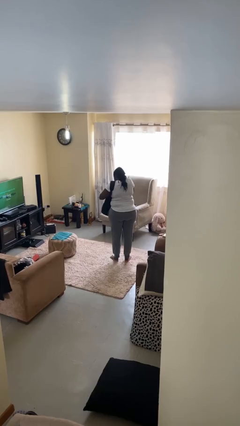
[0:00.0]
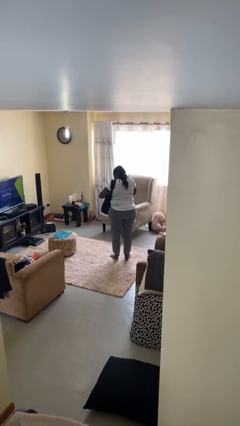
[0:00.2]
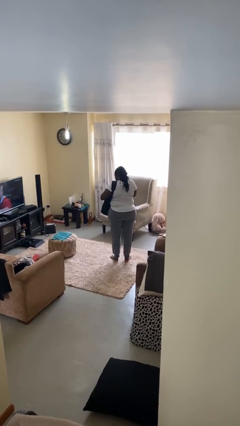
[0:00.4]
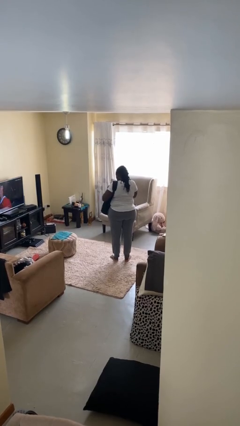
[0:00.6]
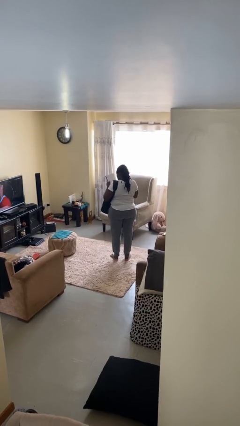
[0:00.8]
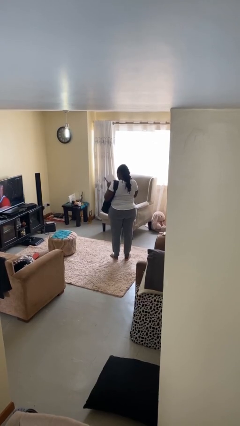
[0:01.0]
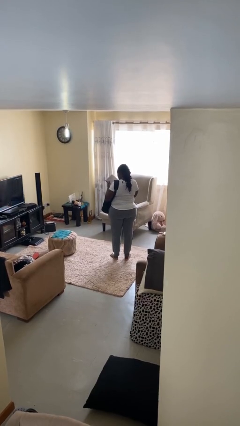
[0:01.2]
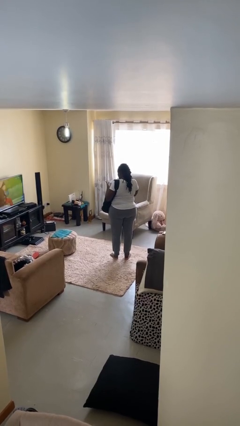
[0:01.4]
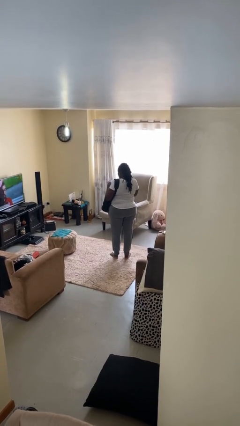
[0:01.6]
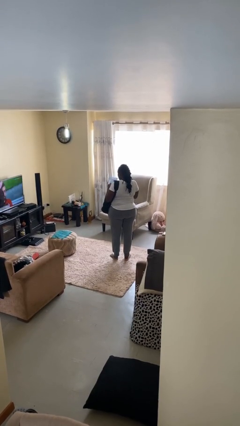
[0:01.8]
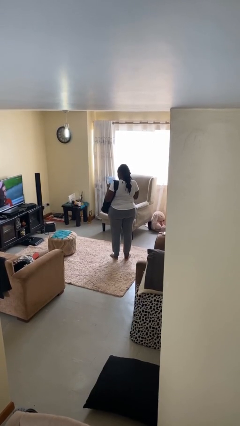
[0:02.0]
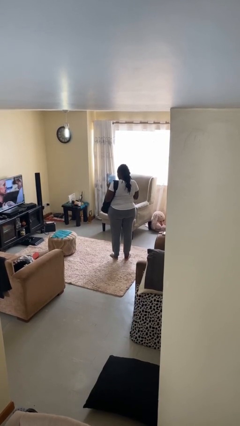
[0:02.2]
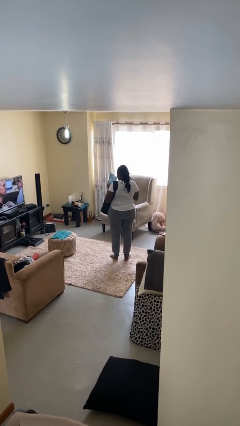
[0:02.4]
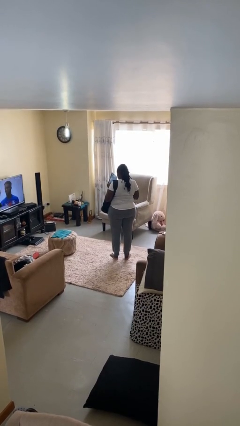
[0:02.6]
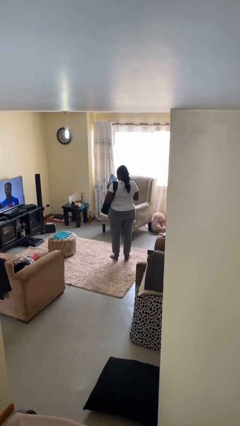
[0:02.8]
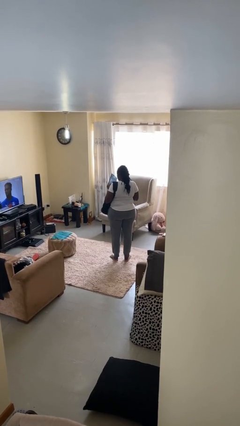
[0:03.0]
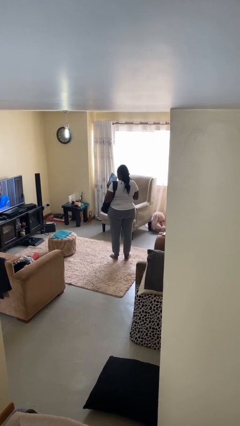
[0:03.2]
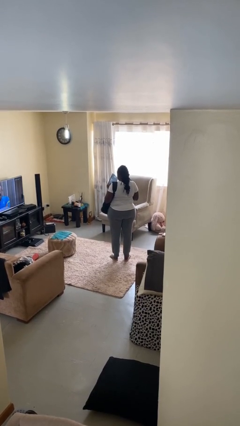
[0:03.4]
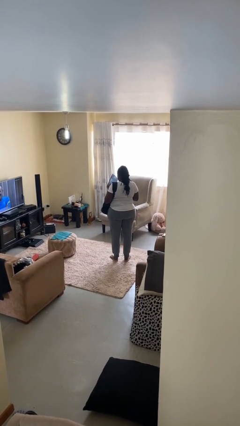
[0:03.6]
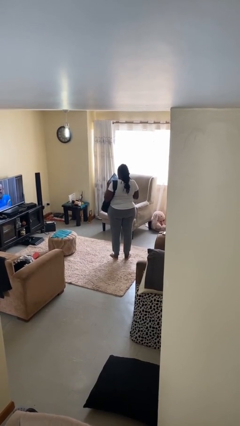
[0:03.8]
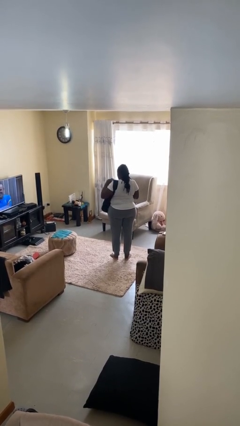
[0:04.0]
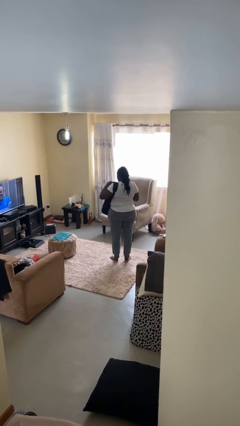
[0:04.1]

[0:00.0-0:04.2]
person takes object from backpack

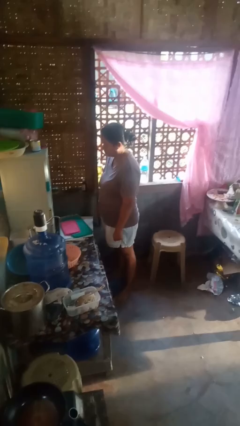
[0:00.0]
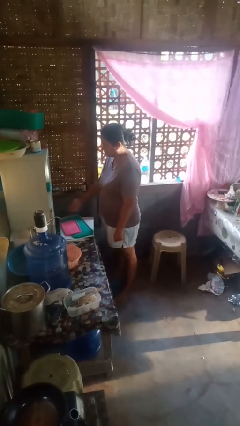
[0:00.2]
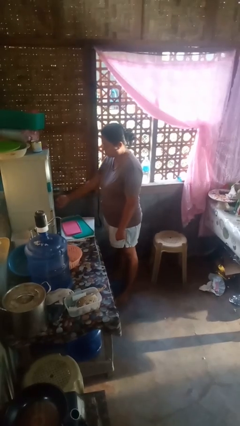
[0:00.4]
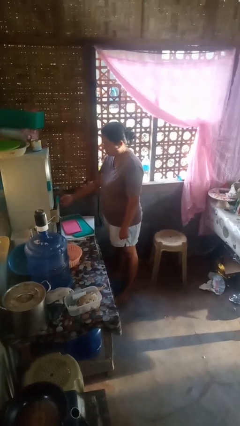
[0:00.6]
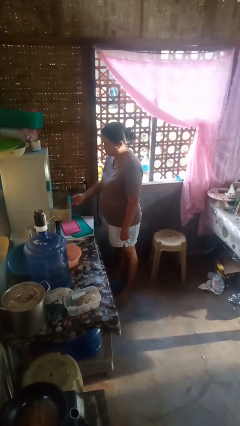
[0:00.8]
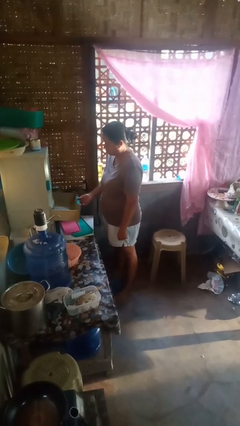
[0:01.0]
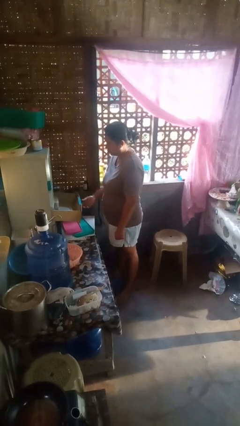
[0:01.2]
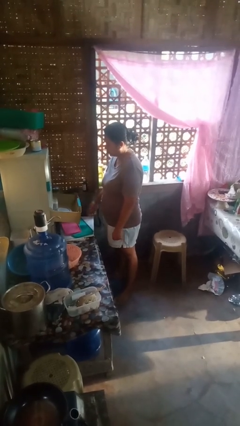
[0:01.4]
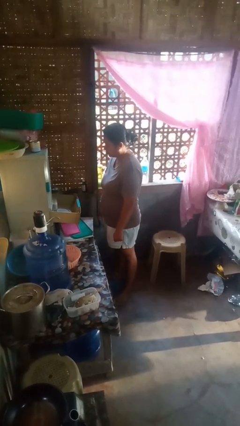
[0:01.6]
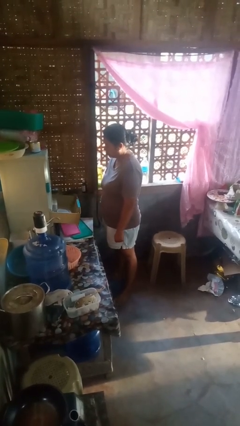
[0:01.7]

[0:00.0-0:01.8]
person opens kitchen drawer

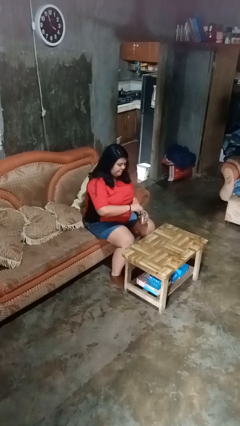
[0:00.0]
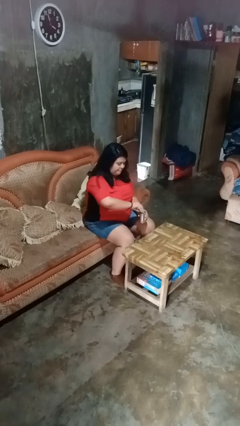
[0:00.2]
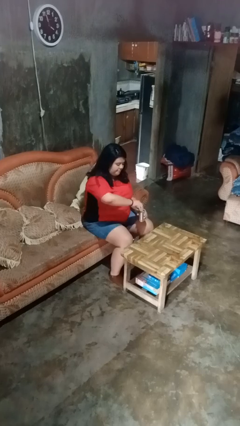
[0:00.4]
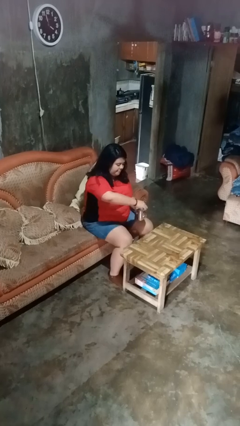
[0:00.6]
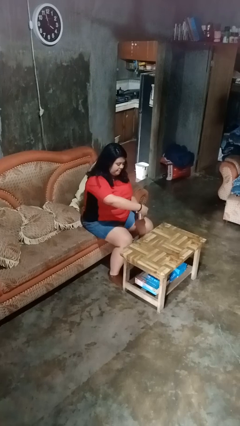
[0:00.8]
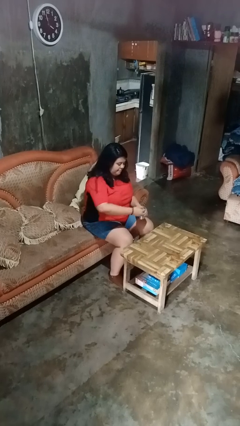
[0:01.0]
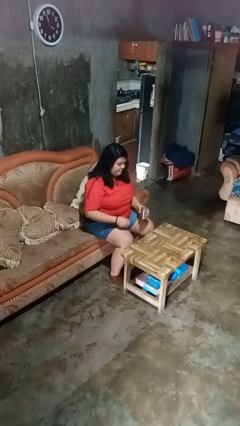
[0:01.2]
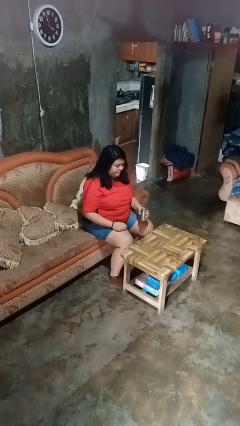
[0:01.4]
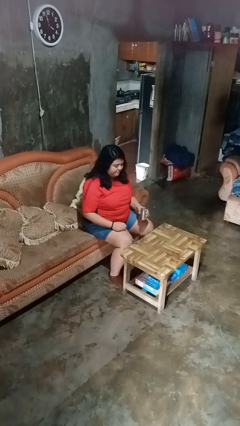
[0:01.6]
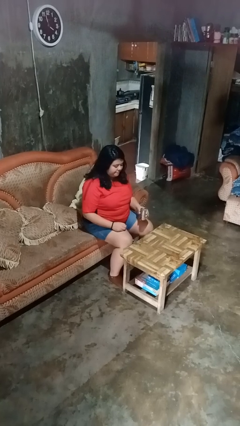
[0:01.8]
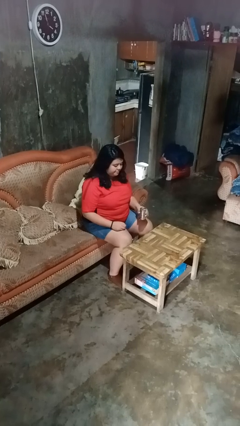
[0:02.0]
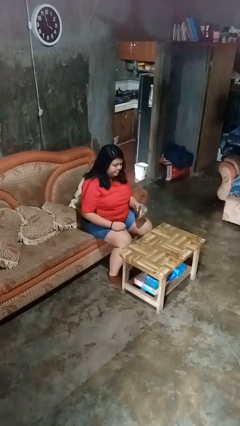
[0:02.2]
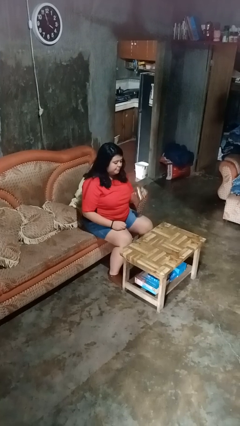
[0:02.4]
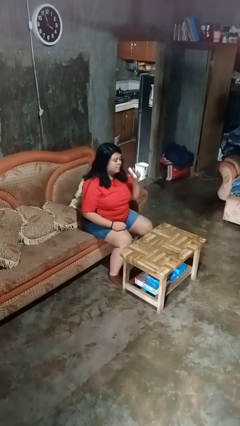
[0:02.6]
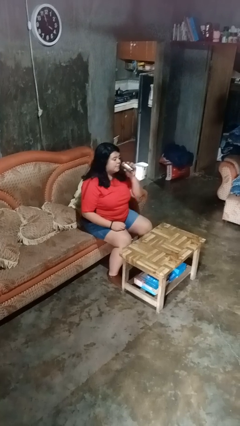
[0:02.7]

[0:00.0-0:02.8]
person opens beverage can

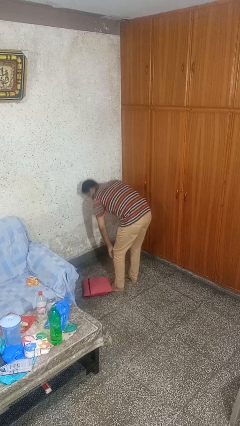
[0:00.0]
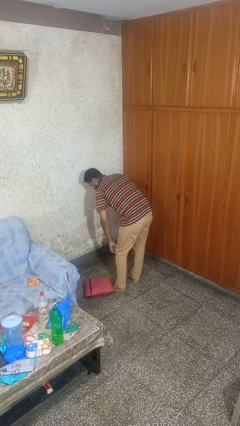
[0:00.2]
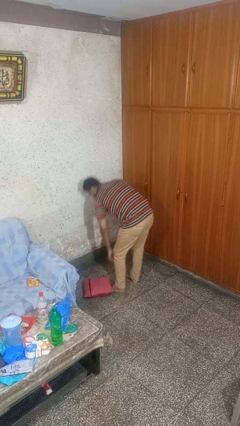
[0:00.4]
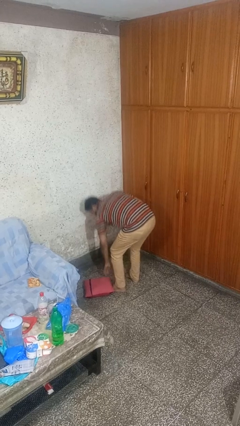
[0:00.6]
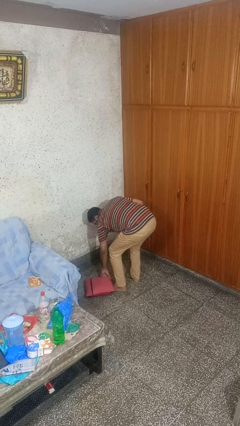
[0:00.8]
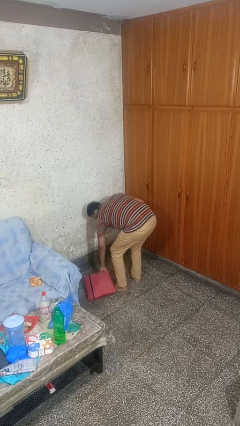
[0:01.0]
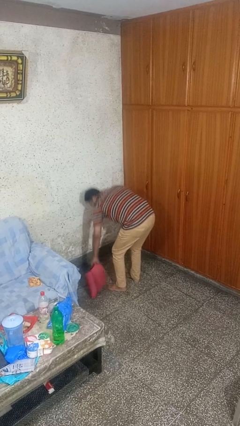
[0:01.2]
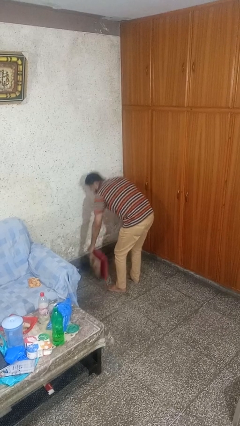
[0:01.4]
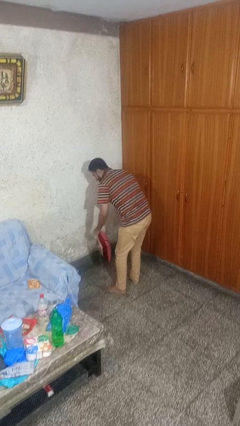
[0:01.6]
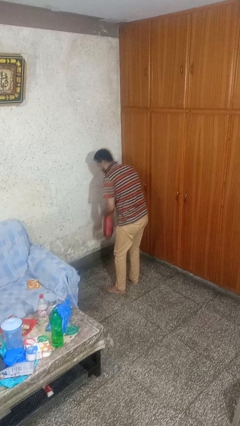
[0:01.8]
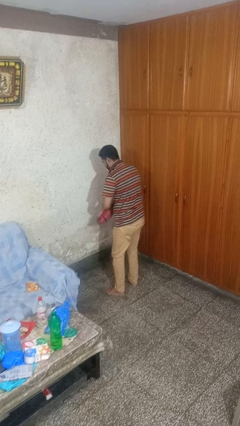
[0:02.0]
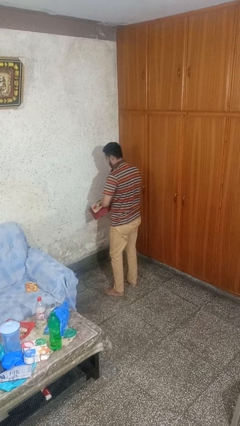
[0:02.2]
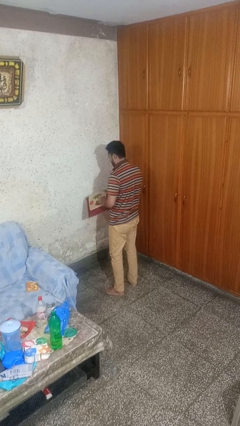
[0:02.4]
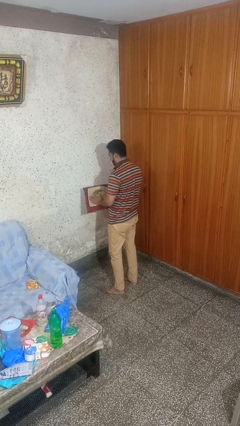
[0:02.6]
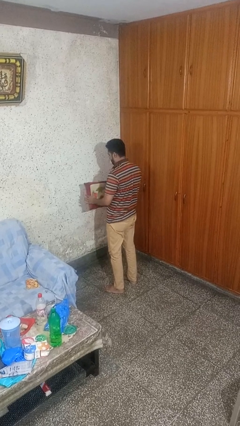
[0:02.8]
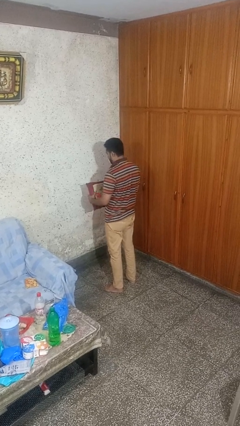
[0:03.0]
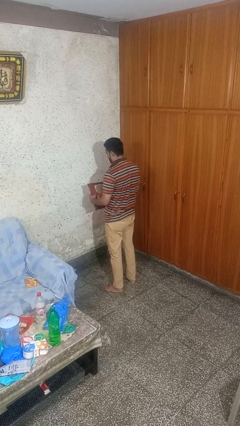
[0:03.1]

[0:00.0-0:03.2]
person picks up object from floor

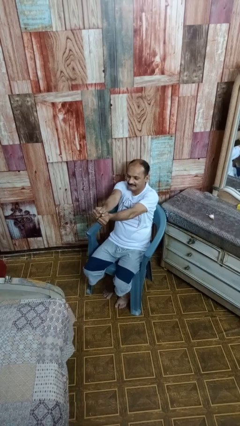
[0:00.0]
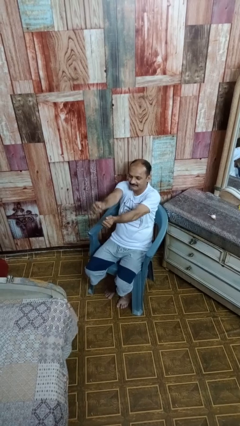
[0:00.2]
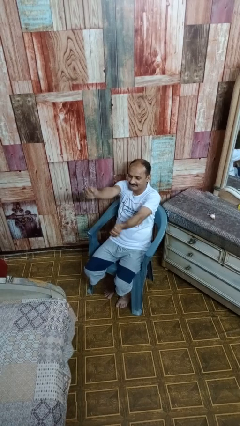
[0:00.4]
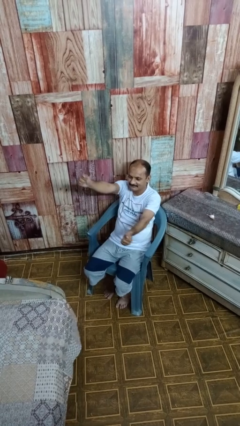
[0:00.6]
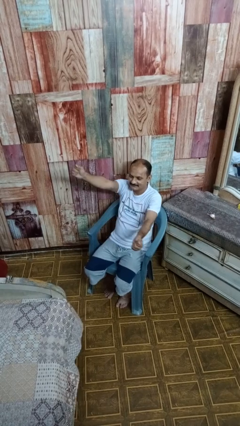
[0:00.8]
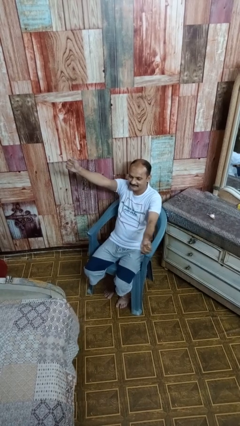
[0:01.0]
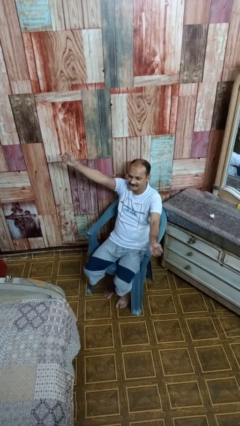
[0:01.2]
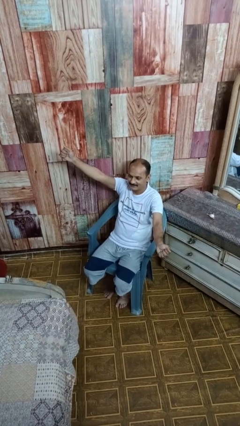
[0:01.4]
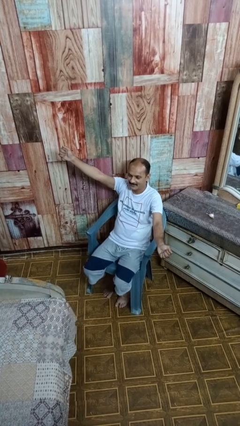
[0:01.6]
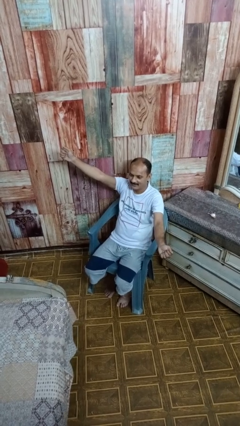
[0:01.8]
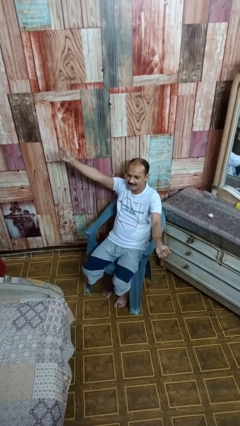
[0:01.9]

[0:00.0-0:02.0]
person gestures zoom out

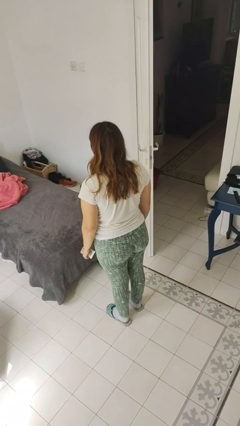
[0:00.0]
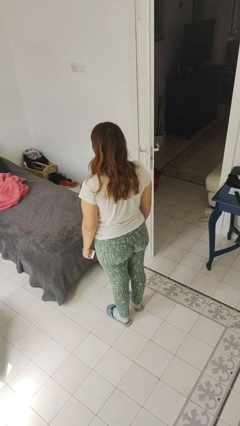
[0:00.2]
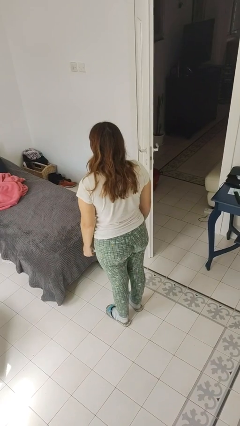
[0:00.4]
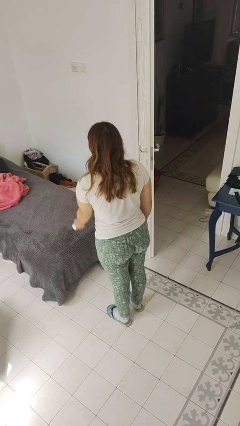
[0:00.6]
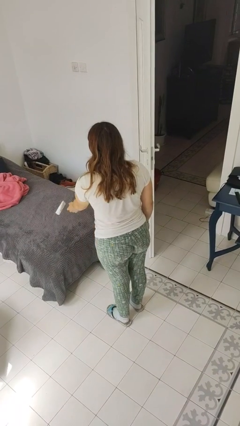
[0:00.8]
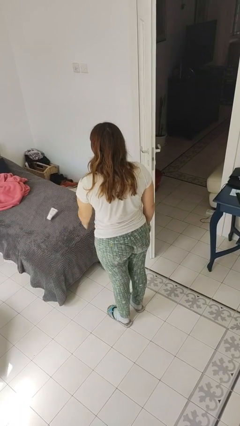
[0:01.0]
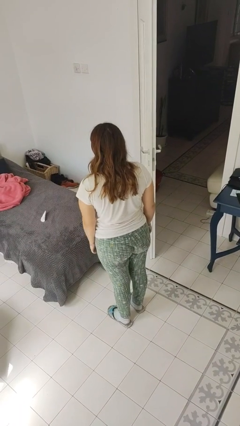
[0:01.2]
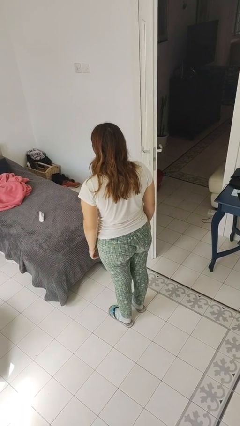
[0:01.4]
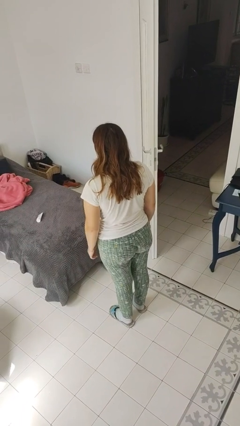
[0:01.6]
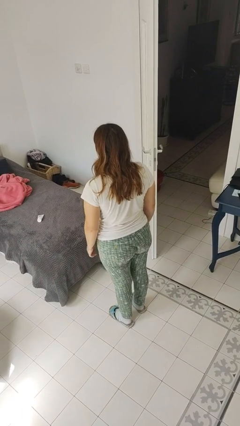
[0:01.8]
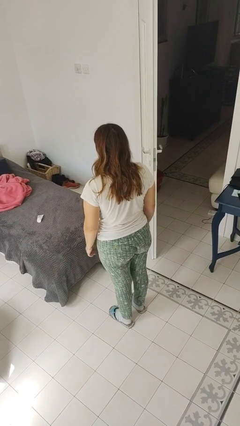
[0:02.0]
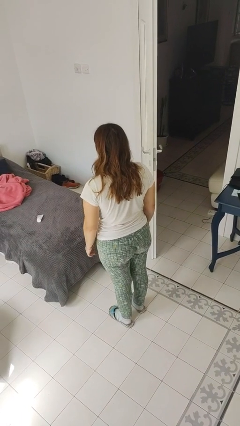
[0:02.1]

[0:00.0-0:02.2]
person throws object on bed

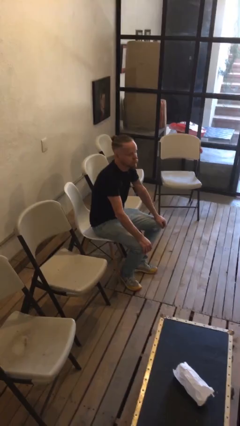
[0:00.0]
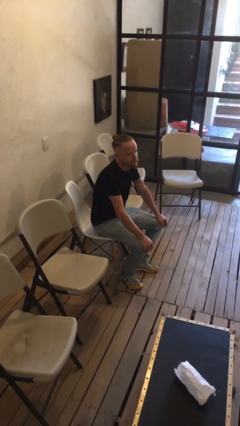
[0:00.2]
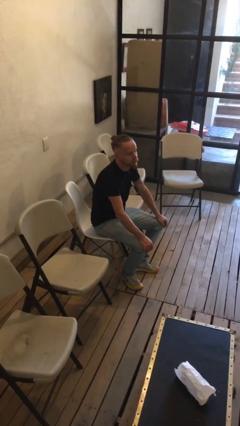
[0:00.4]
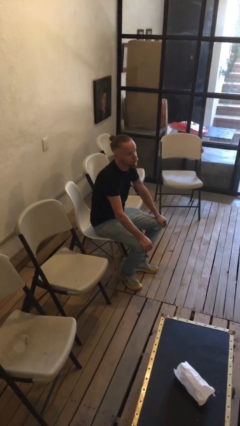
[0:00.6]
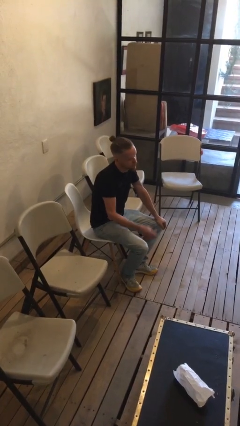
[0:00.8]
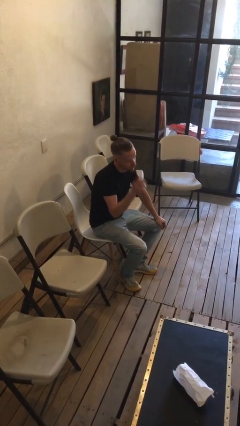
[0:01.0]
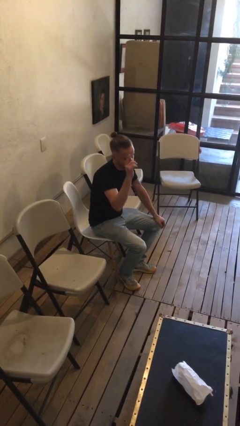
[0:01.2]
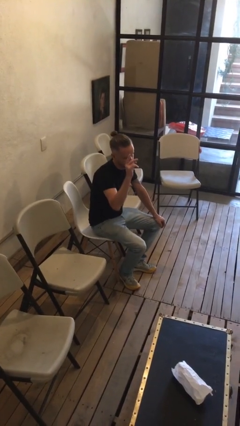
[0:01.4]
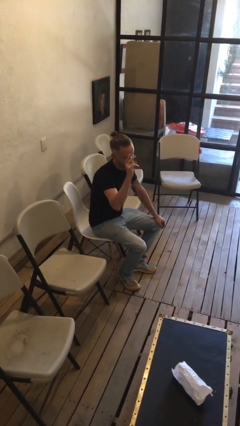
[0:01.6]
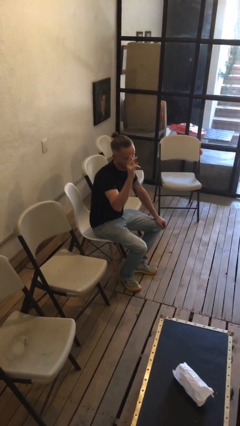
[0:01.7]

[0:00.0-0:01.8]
person gestures raise hand
